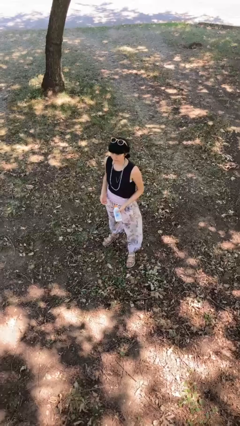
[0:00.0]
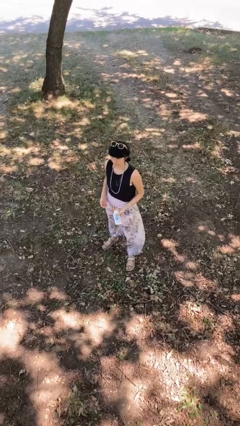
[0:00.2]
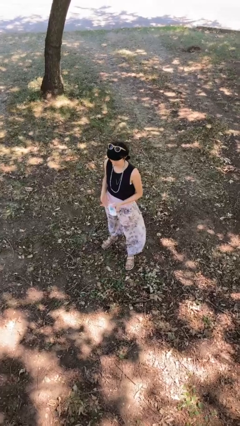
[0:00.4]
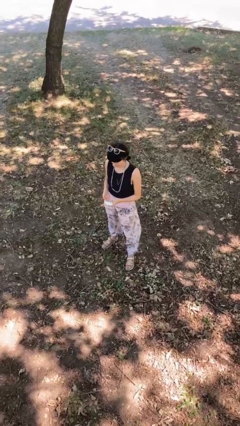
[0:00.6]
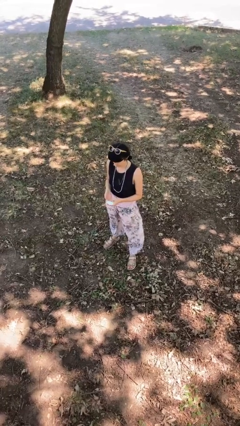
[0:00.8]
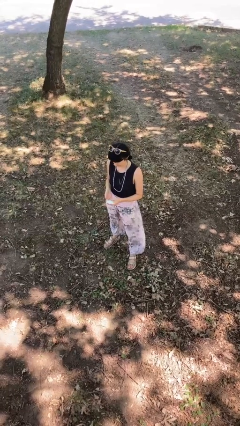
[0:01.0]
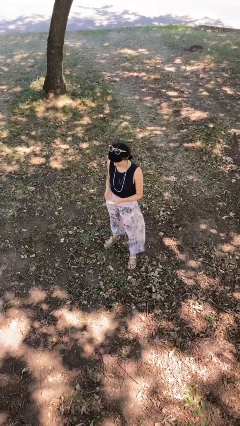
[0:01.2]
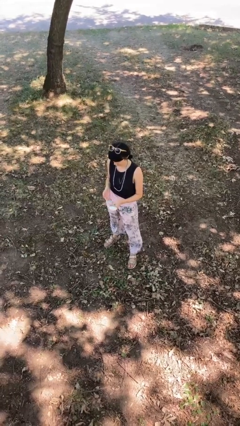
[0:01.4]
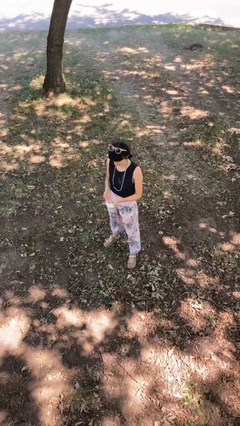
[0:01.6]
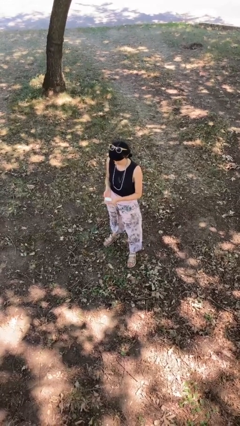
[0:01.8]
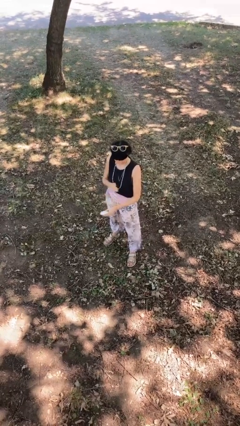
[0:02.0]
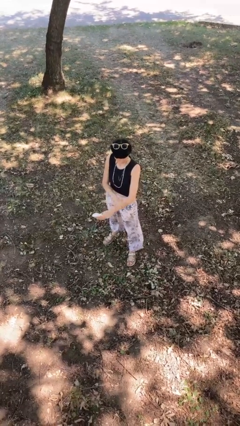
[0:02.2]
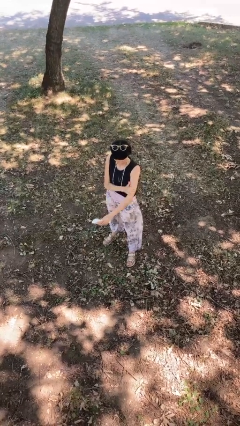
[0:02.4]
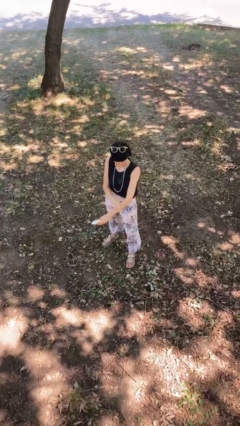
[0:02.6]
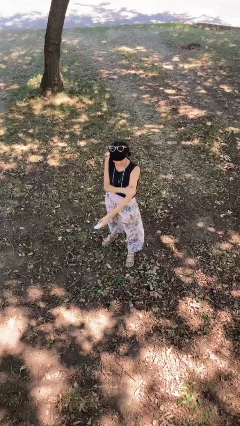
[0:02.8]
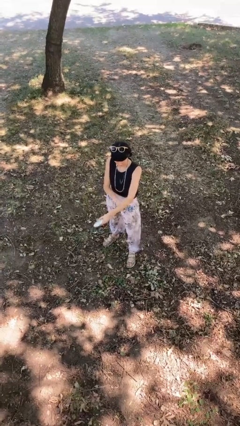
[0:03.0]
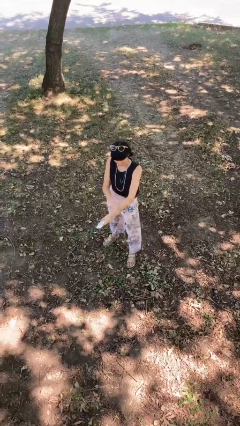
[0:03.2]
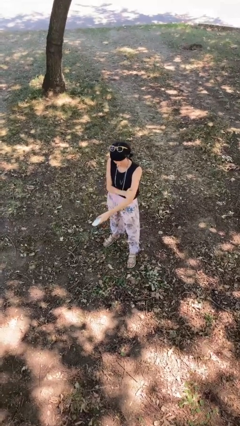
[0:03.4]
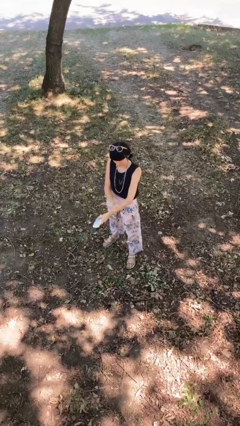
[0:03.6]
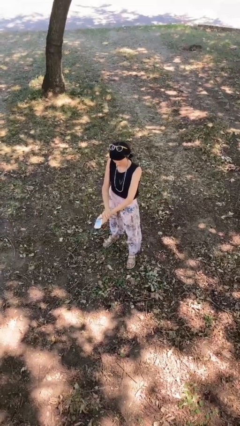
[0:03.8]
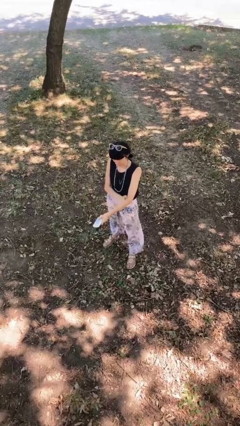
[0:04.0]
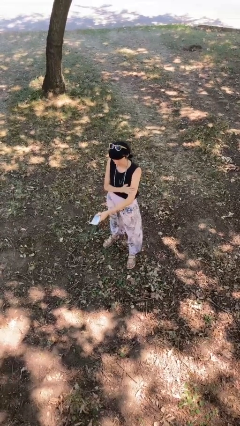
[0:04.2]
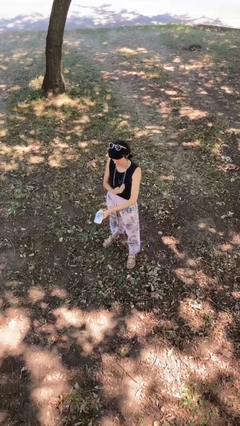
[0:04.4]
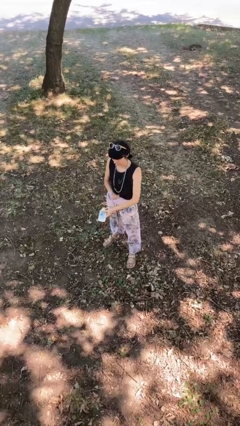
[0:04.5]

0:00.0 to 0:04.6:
person applies sunscreen

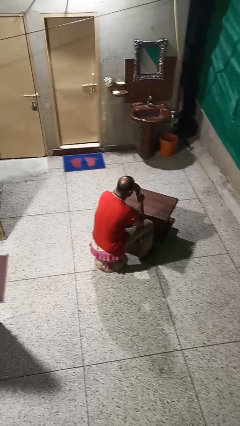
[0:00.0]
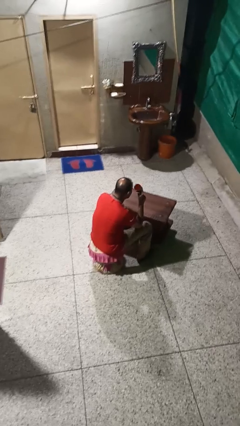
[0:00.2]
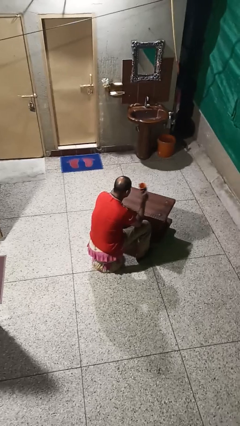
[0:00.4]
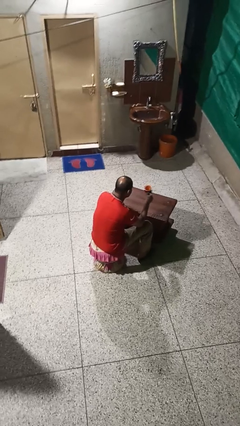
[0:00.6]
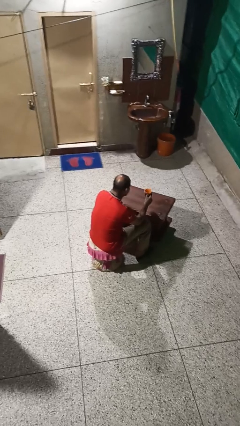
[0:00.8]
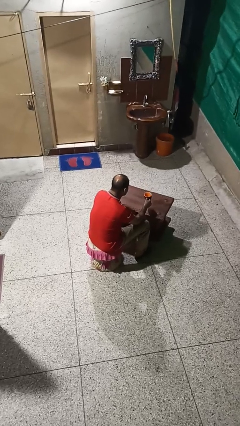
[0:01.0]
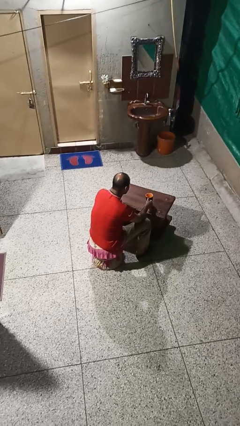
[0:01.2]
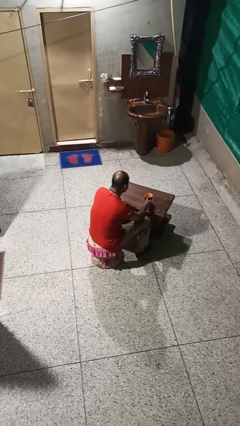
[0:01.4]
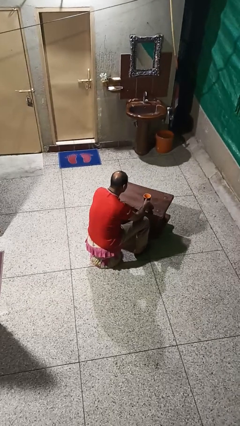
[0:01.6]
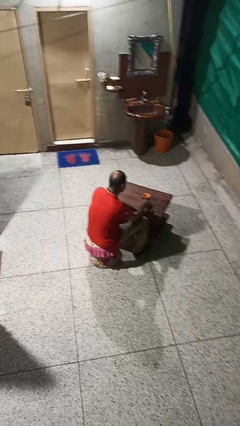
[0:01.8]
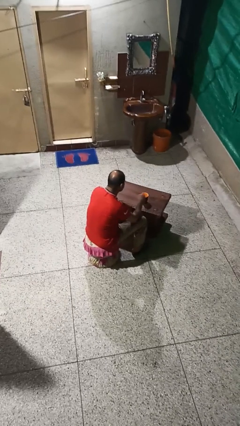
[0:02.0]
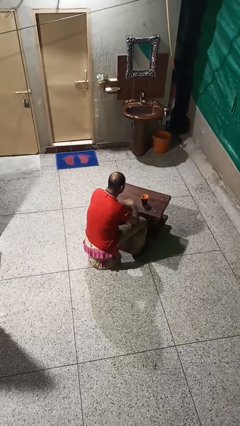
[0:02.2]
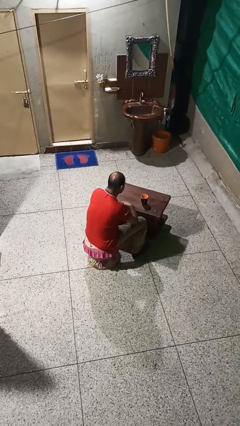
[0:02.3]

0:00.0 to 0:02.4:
person puts down object on table

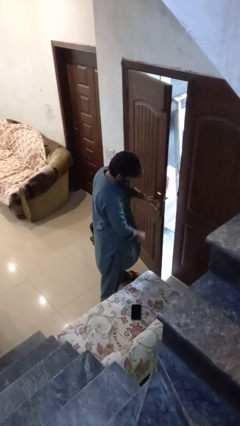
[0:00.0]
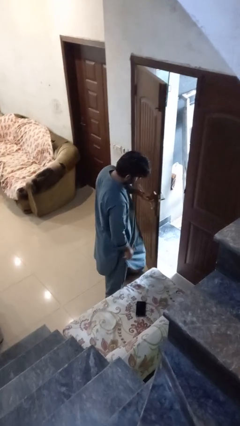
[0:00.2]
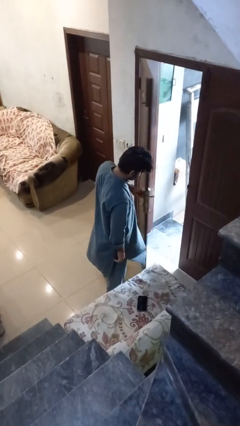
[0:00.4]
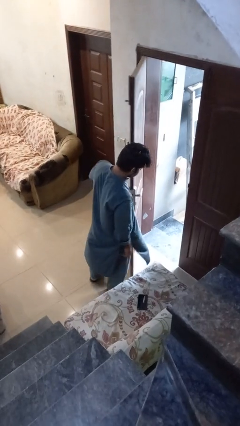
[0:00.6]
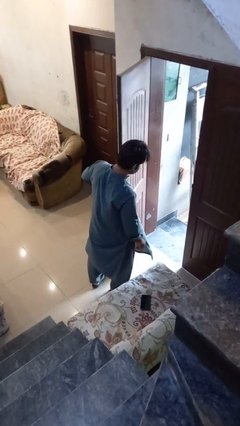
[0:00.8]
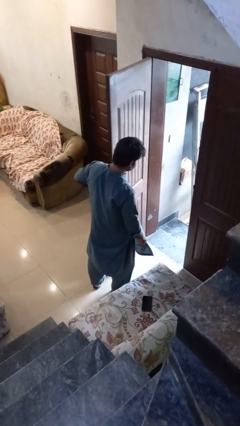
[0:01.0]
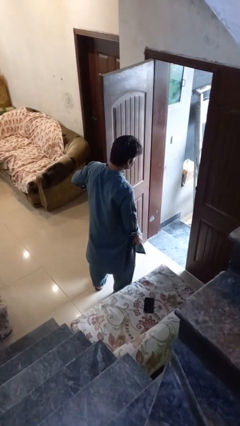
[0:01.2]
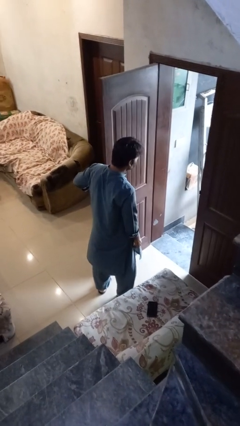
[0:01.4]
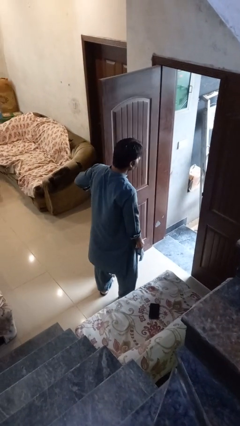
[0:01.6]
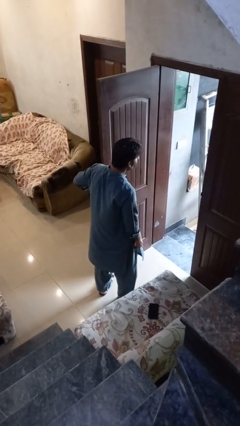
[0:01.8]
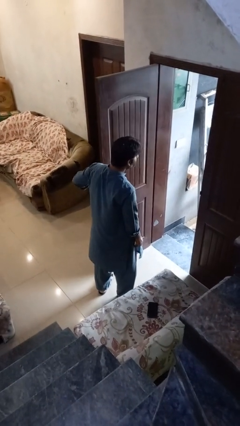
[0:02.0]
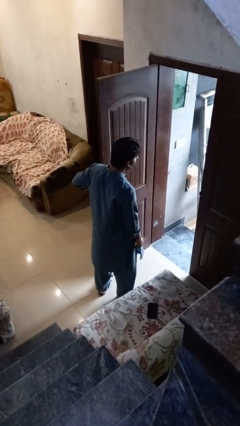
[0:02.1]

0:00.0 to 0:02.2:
person opens facility door

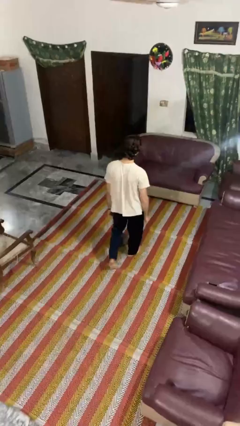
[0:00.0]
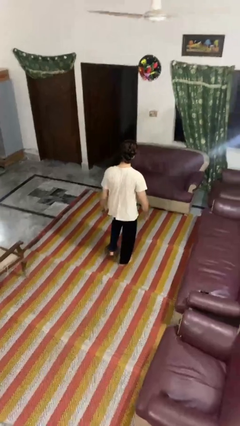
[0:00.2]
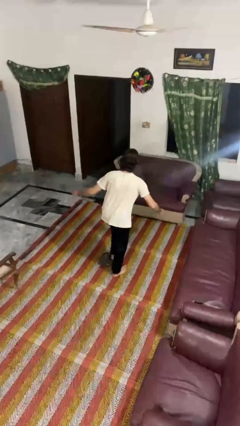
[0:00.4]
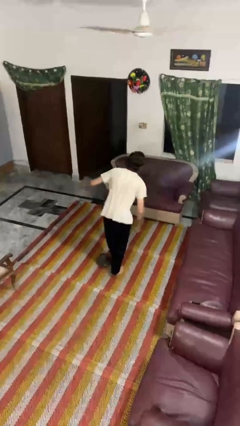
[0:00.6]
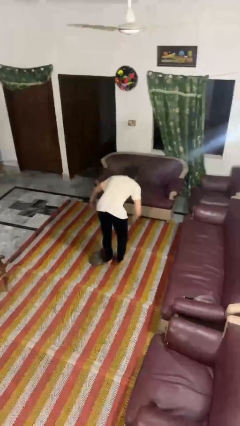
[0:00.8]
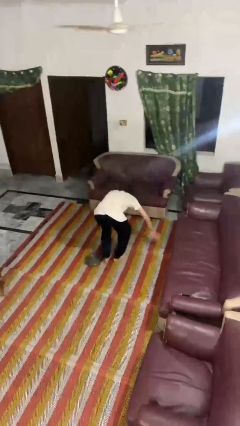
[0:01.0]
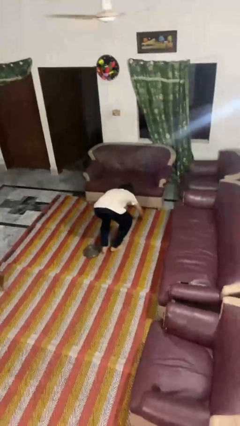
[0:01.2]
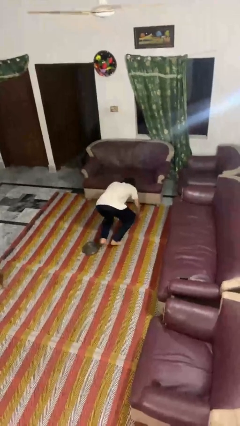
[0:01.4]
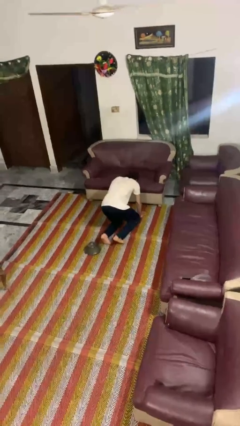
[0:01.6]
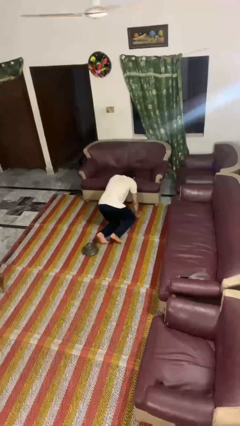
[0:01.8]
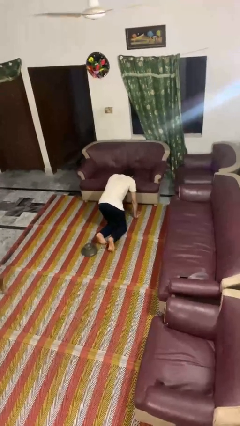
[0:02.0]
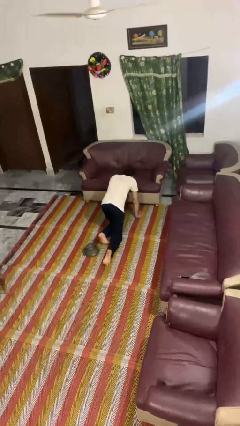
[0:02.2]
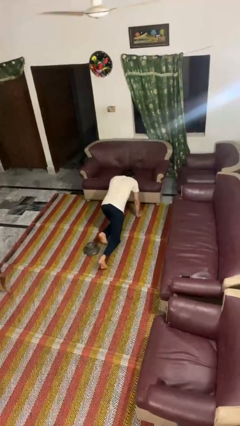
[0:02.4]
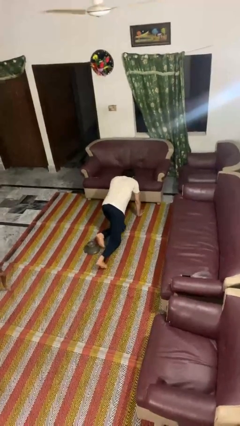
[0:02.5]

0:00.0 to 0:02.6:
person trips on object on floor

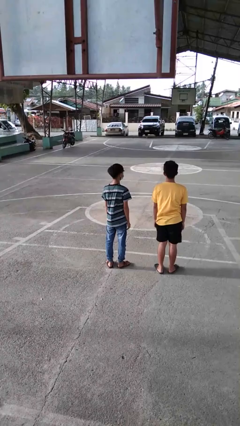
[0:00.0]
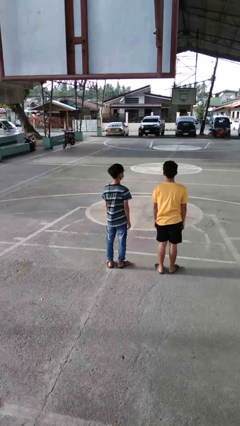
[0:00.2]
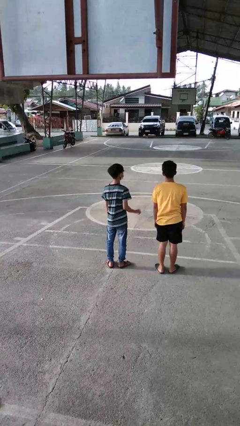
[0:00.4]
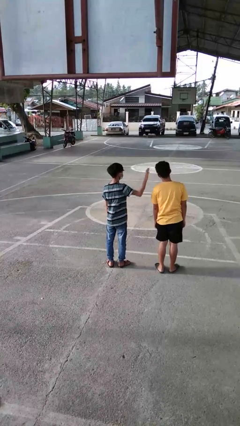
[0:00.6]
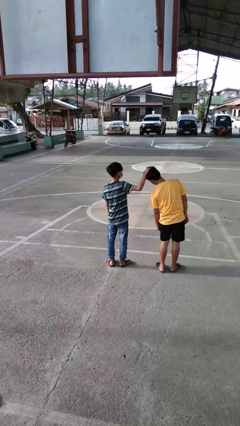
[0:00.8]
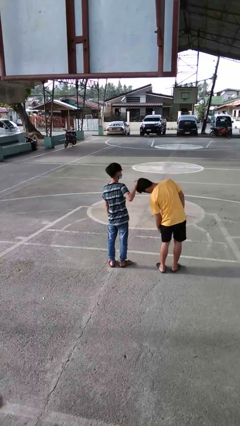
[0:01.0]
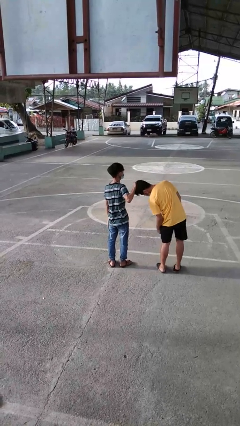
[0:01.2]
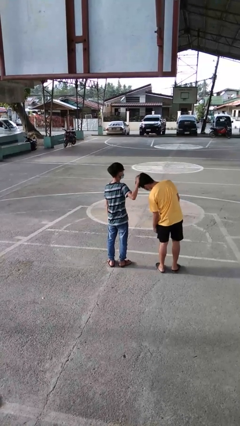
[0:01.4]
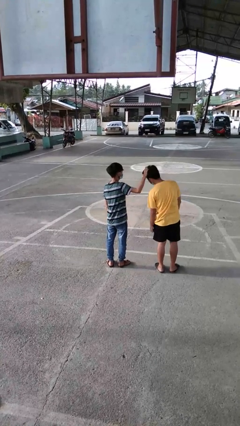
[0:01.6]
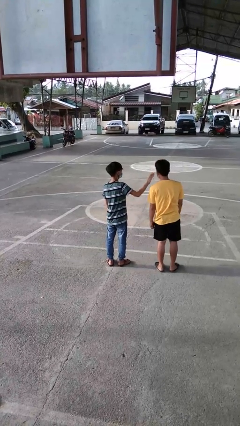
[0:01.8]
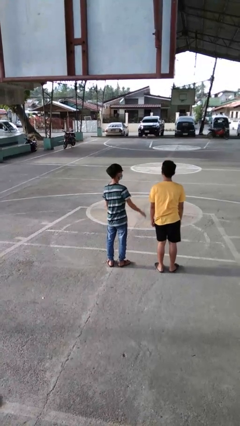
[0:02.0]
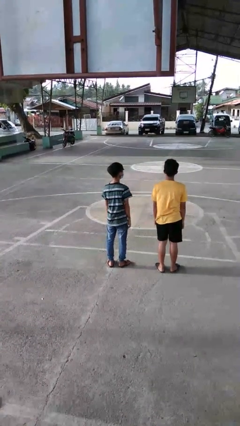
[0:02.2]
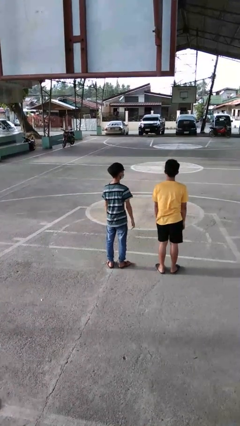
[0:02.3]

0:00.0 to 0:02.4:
person grabs person by hair

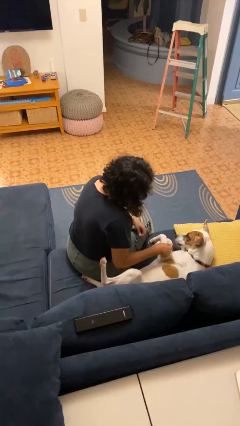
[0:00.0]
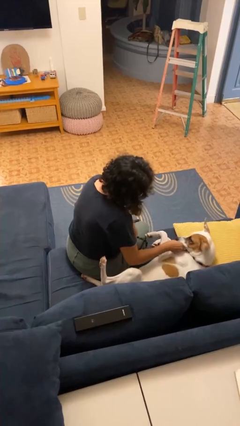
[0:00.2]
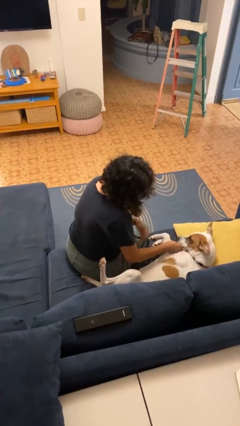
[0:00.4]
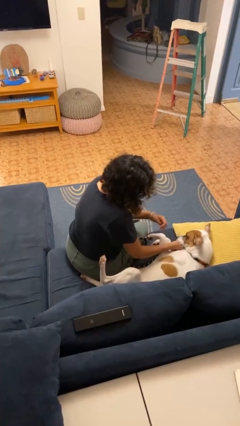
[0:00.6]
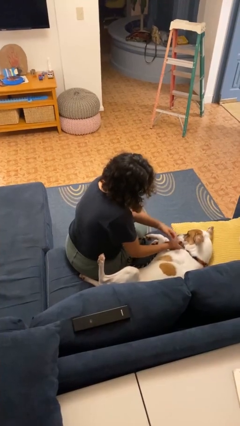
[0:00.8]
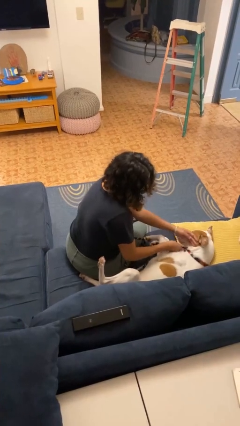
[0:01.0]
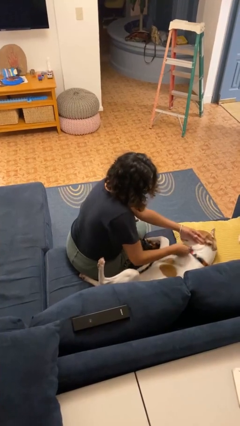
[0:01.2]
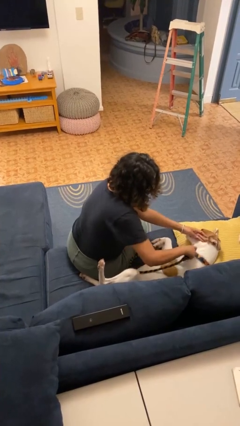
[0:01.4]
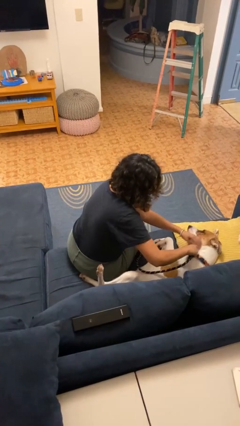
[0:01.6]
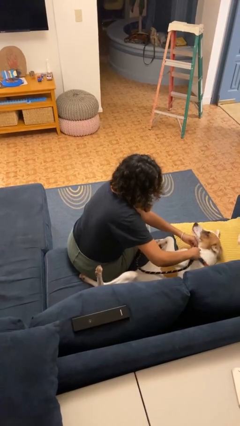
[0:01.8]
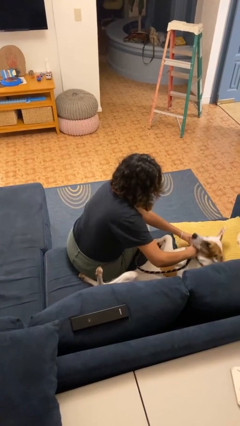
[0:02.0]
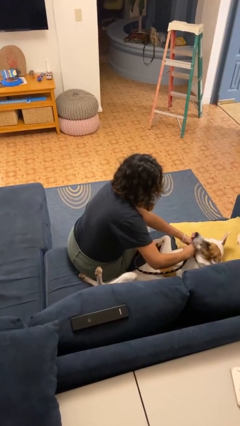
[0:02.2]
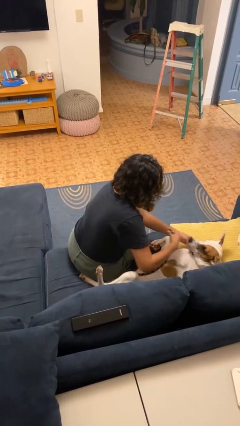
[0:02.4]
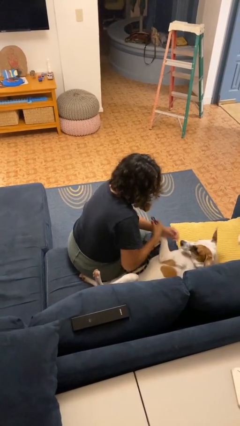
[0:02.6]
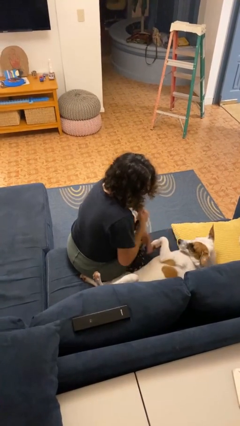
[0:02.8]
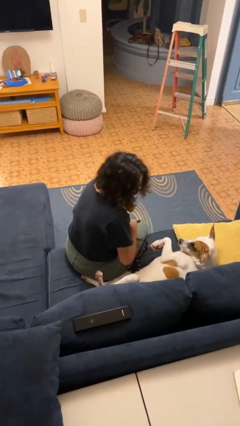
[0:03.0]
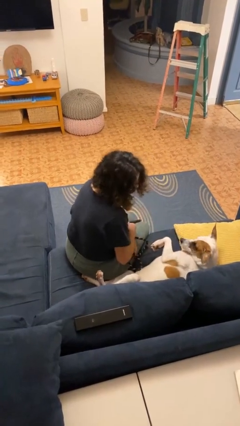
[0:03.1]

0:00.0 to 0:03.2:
person unattaches leash from dog
